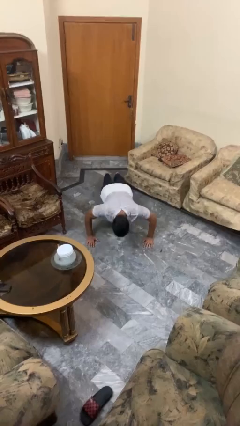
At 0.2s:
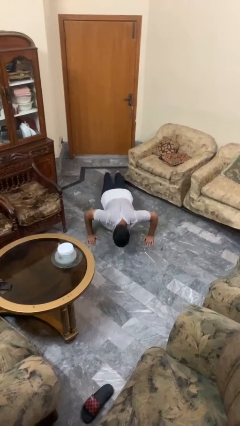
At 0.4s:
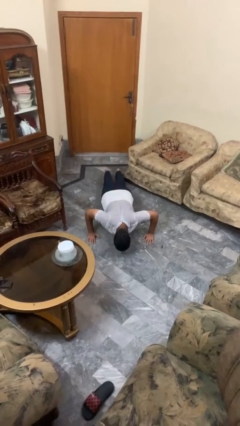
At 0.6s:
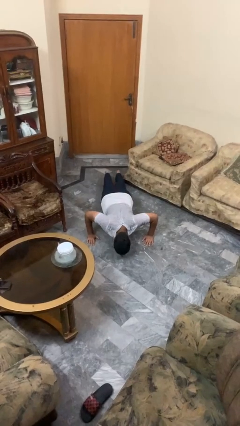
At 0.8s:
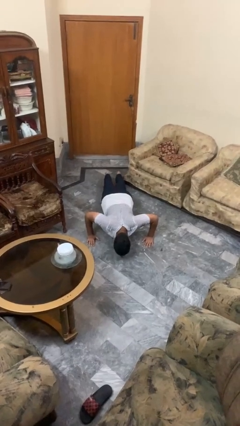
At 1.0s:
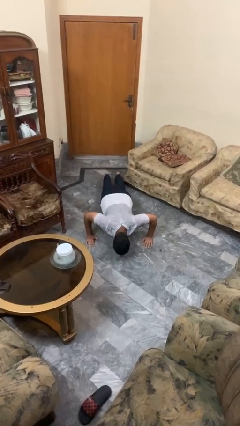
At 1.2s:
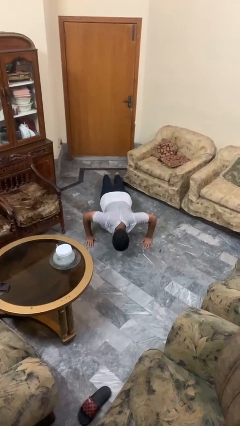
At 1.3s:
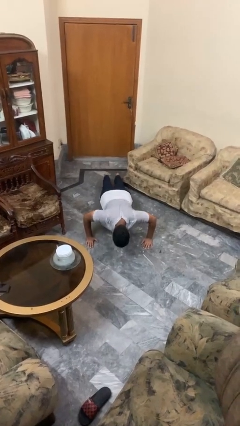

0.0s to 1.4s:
person exercises with pushup

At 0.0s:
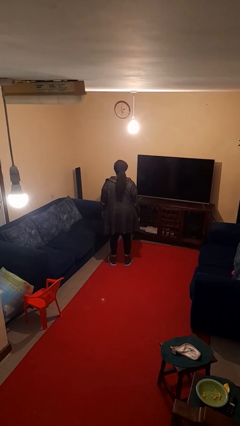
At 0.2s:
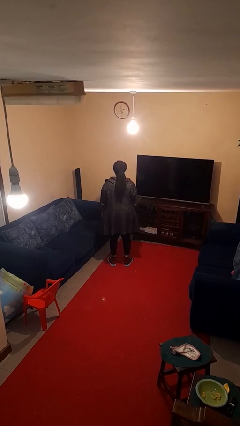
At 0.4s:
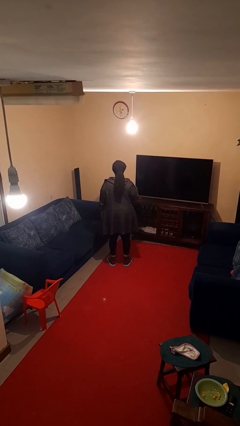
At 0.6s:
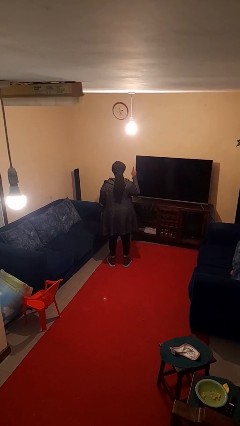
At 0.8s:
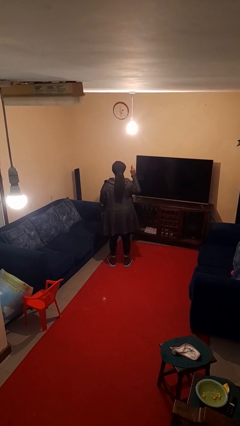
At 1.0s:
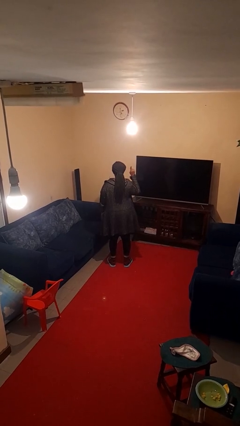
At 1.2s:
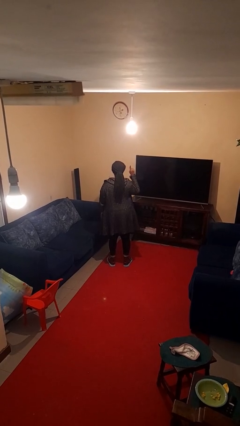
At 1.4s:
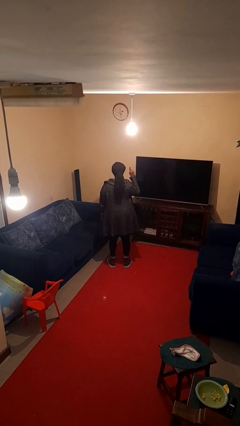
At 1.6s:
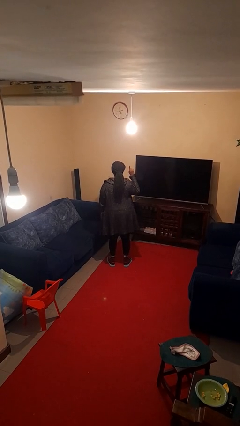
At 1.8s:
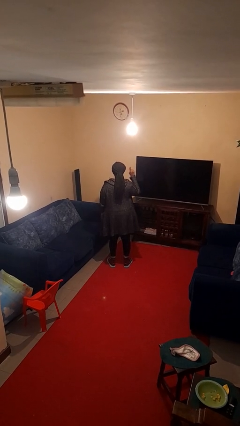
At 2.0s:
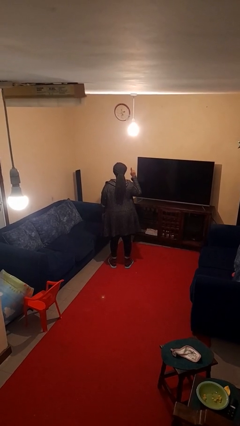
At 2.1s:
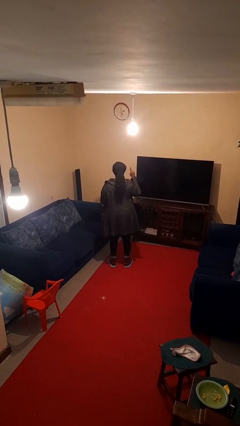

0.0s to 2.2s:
person gestures number one

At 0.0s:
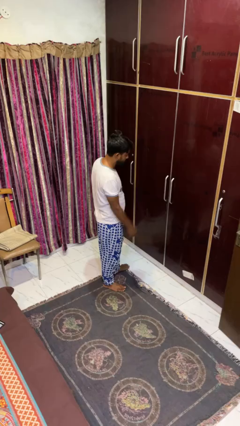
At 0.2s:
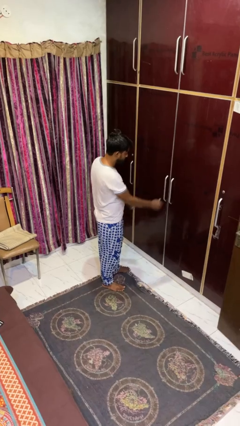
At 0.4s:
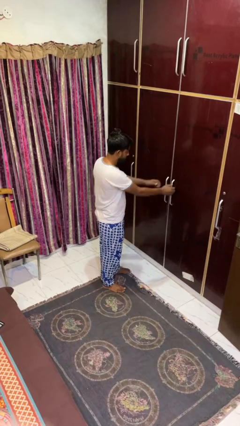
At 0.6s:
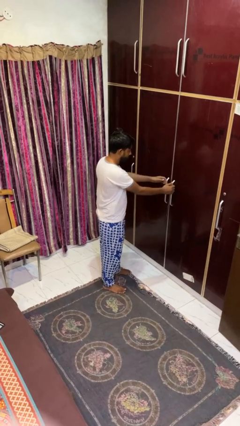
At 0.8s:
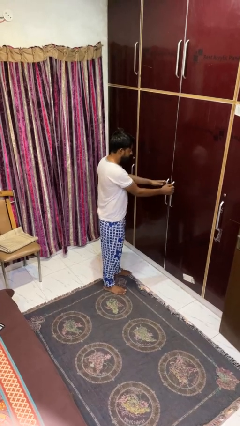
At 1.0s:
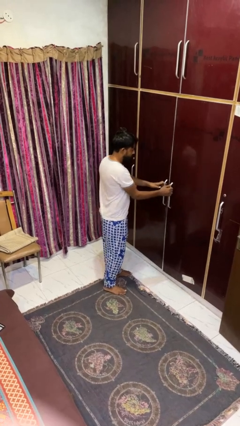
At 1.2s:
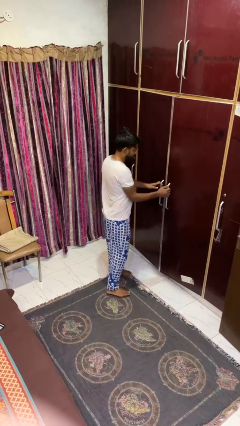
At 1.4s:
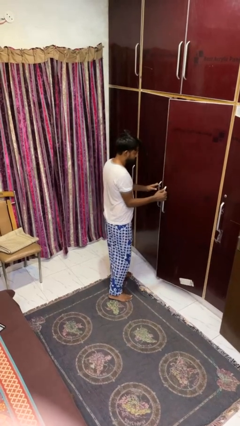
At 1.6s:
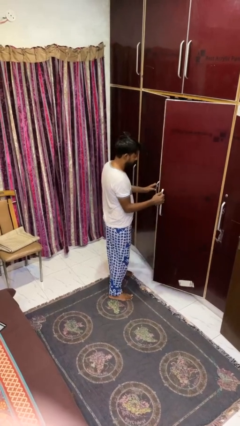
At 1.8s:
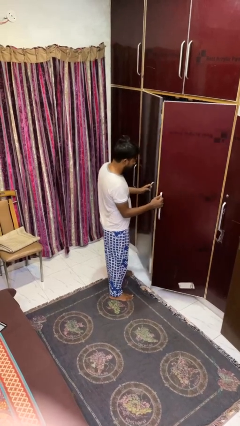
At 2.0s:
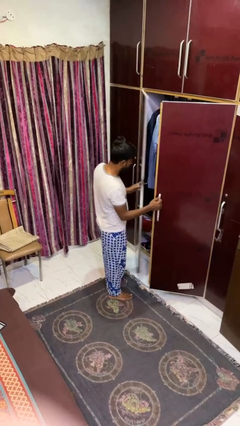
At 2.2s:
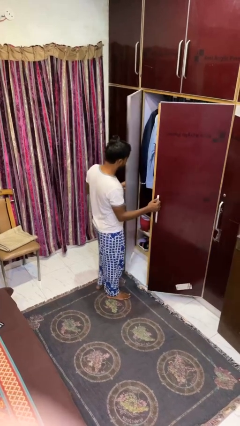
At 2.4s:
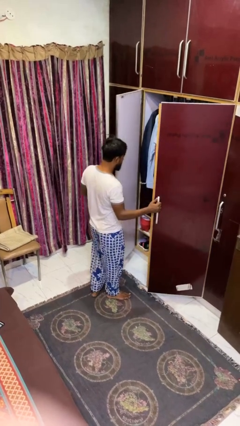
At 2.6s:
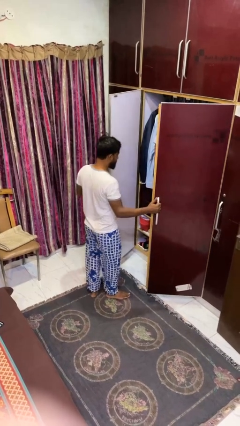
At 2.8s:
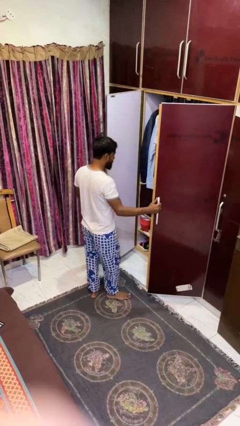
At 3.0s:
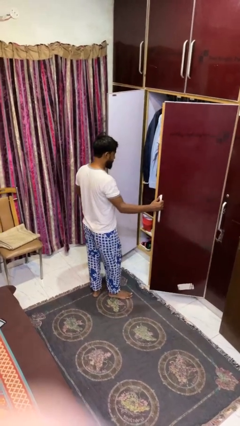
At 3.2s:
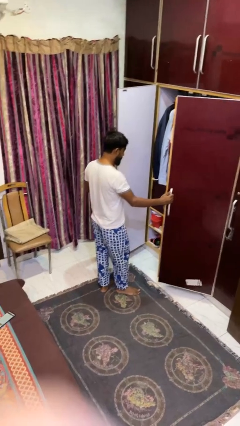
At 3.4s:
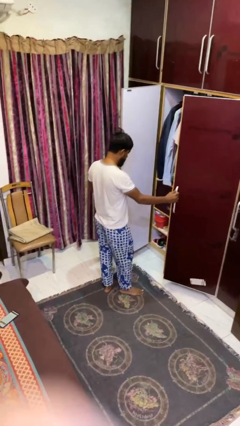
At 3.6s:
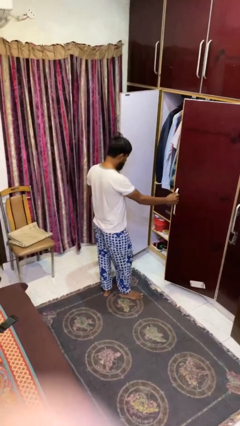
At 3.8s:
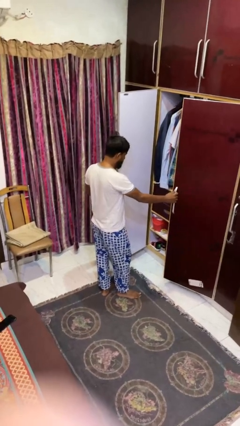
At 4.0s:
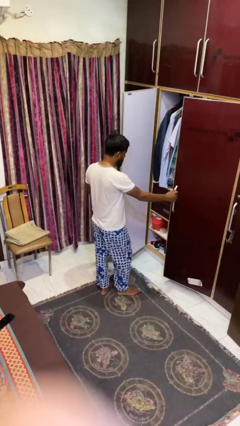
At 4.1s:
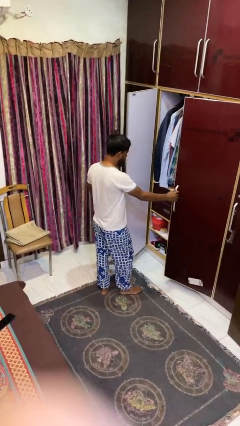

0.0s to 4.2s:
person opens closet door

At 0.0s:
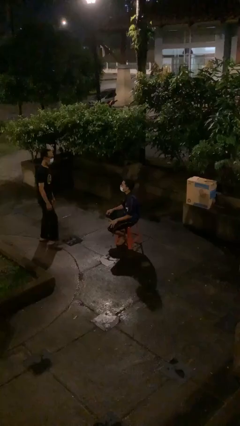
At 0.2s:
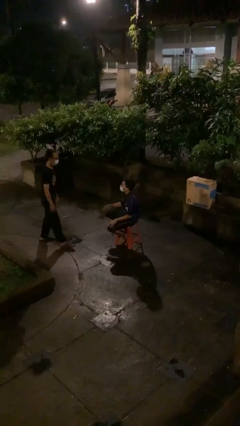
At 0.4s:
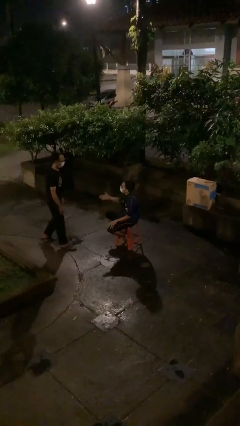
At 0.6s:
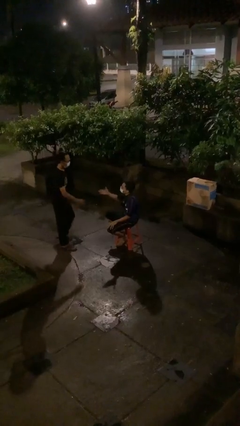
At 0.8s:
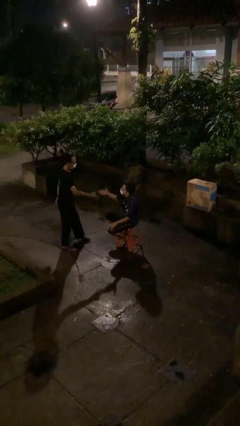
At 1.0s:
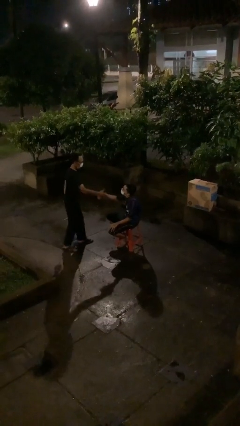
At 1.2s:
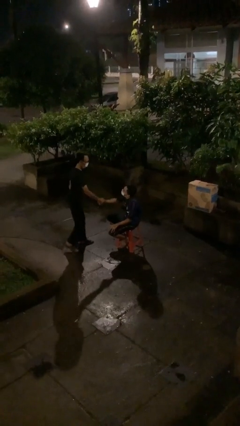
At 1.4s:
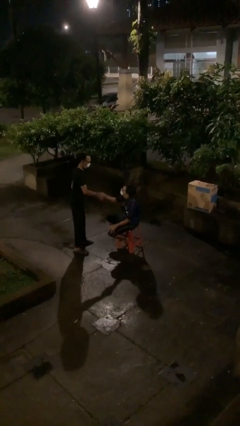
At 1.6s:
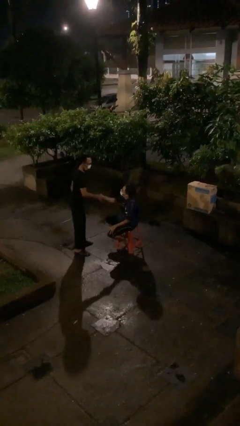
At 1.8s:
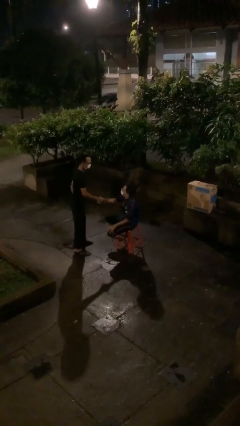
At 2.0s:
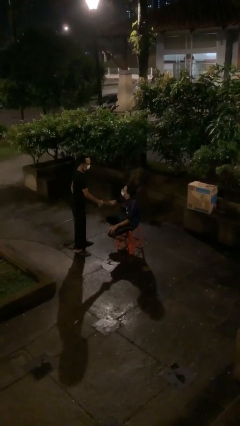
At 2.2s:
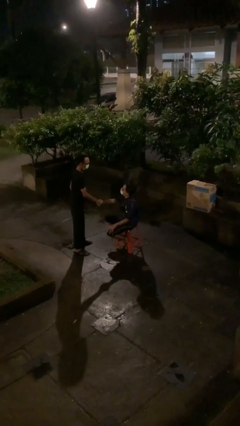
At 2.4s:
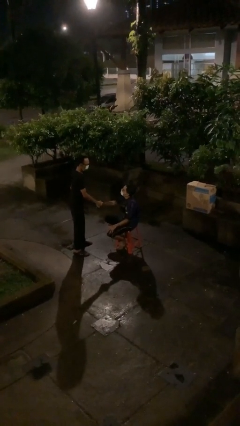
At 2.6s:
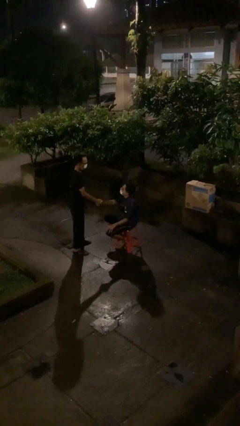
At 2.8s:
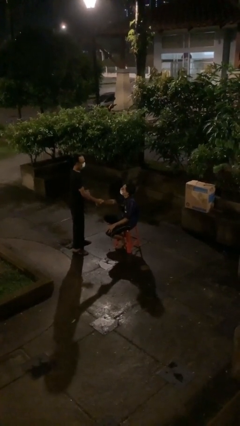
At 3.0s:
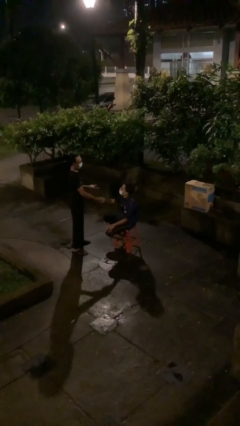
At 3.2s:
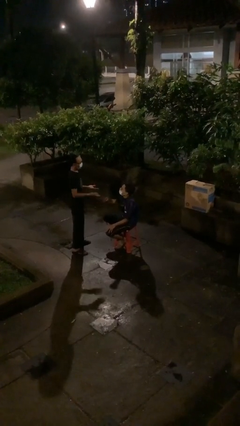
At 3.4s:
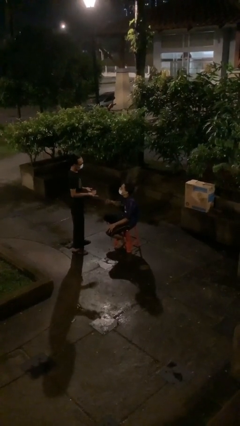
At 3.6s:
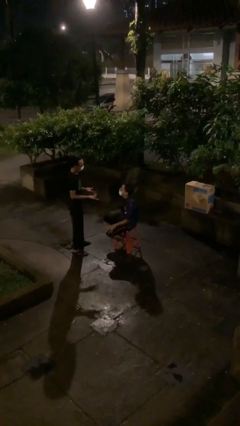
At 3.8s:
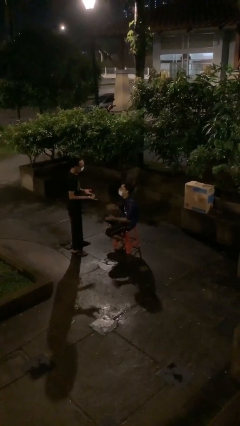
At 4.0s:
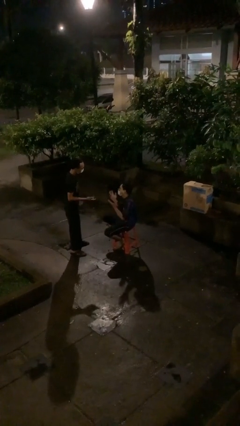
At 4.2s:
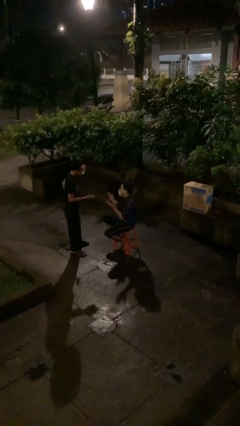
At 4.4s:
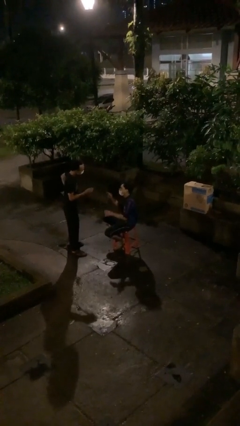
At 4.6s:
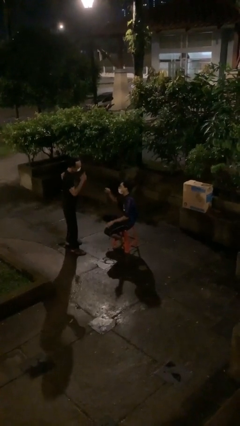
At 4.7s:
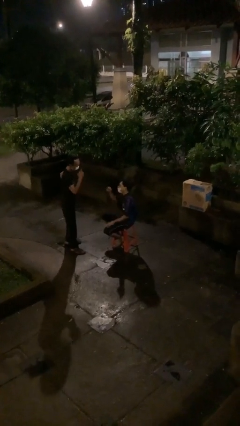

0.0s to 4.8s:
person shakes hand

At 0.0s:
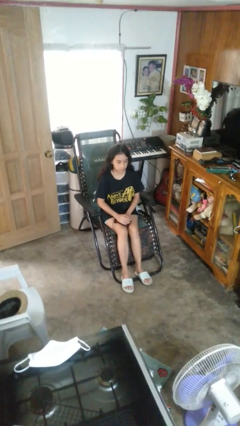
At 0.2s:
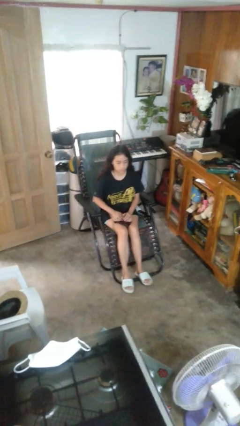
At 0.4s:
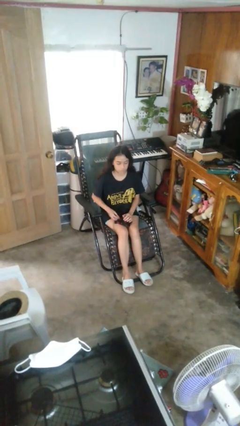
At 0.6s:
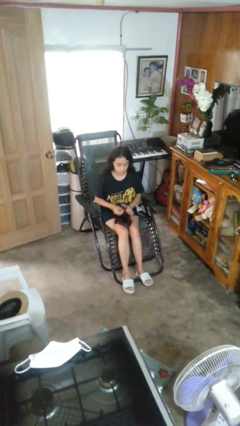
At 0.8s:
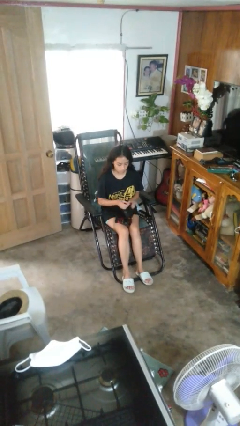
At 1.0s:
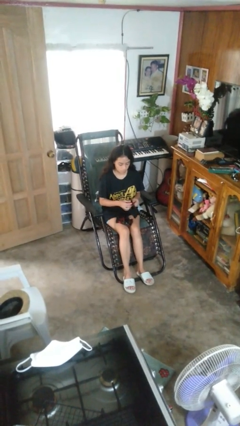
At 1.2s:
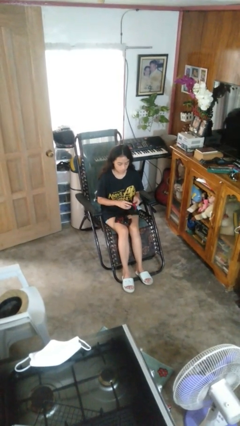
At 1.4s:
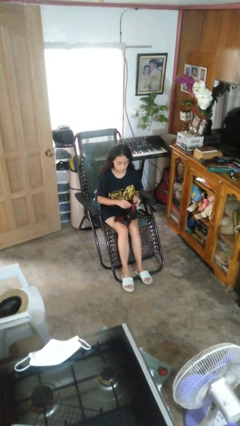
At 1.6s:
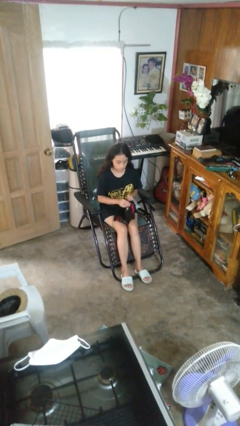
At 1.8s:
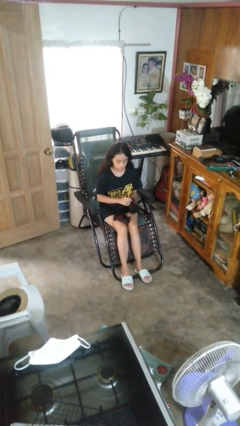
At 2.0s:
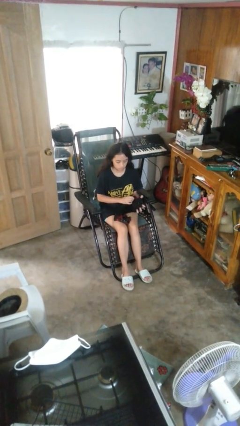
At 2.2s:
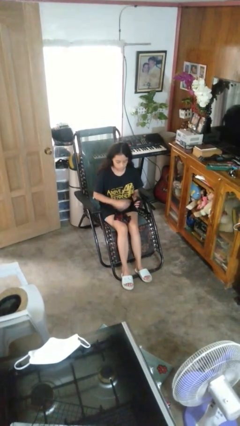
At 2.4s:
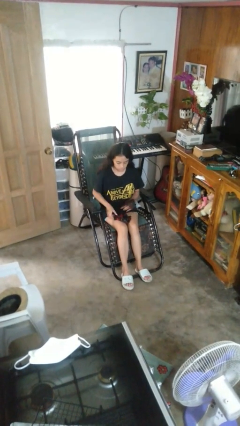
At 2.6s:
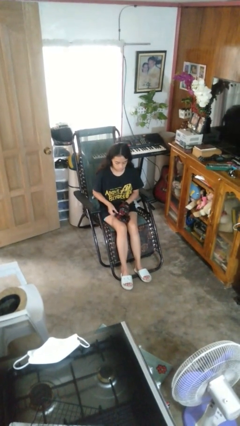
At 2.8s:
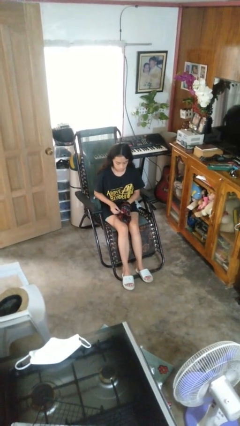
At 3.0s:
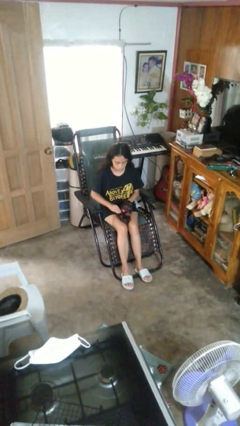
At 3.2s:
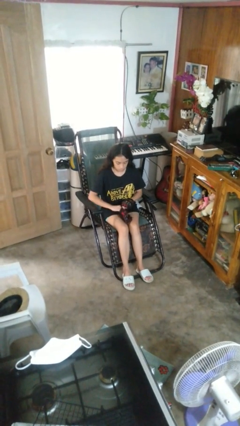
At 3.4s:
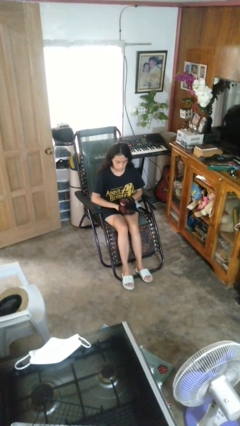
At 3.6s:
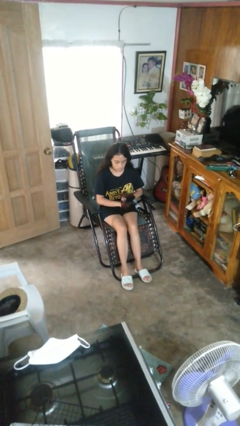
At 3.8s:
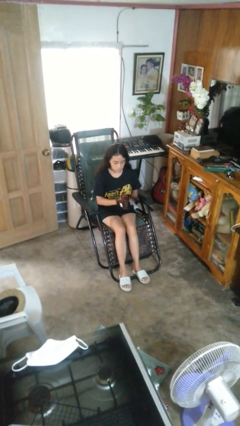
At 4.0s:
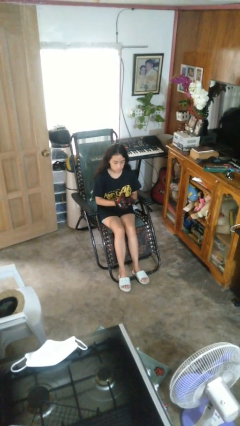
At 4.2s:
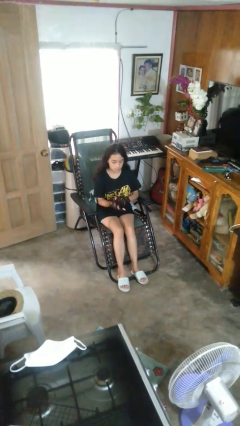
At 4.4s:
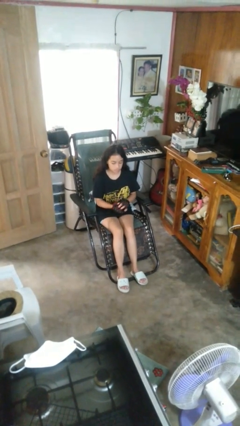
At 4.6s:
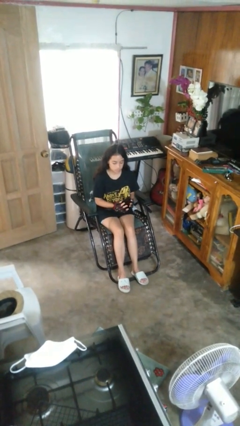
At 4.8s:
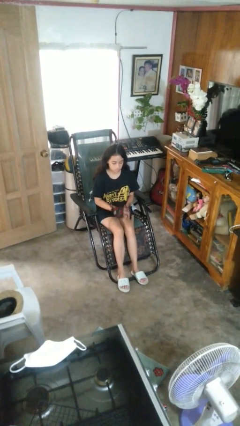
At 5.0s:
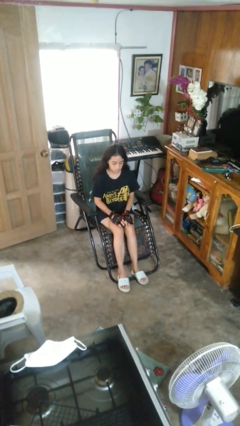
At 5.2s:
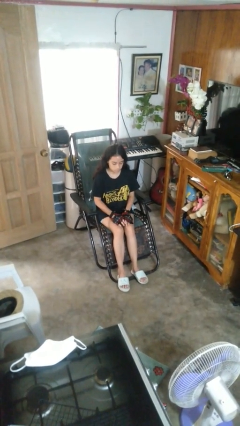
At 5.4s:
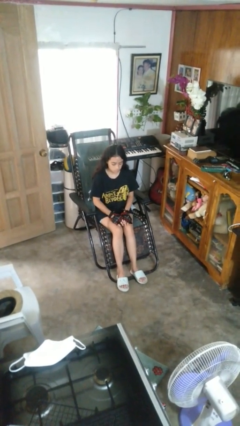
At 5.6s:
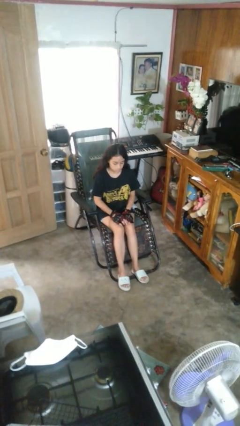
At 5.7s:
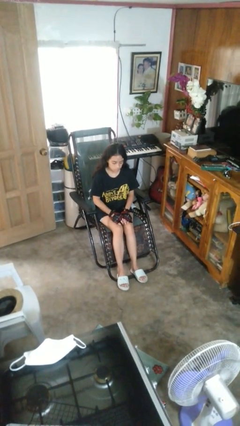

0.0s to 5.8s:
person puts on gloves
